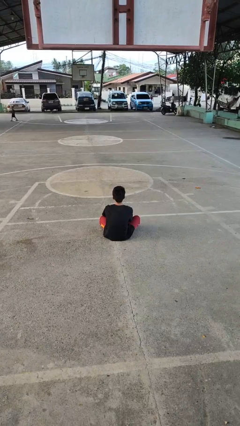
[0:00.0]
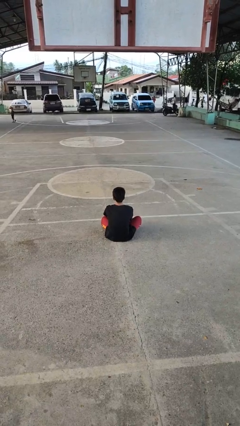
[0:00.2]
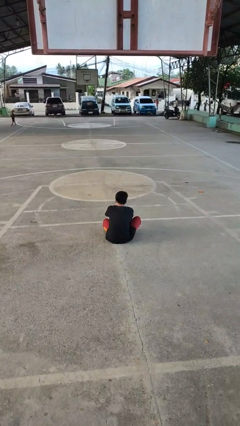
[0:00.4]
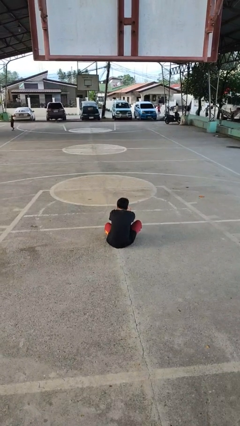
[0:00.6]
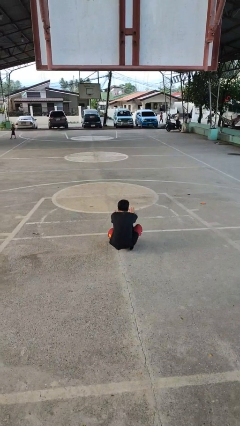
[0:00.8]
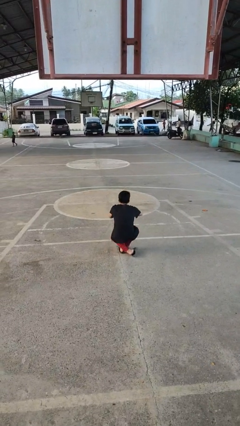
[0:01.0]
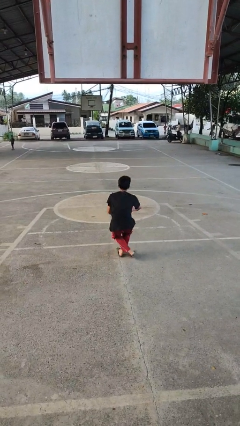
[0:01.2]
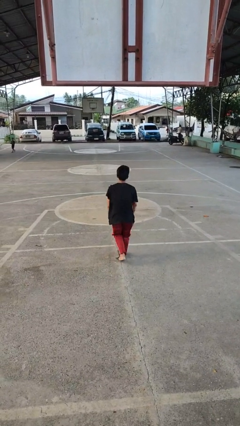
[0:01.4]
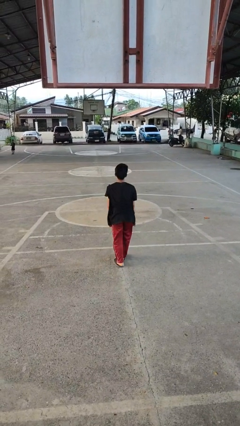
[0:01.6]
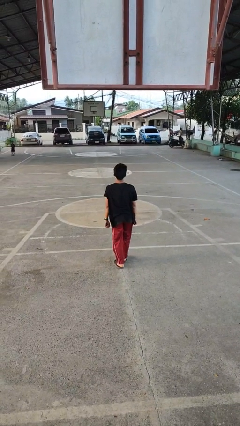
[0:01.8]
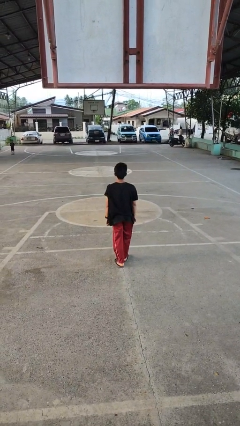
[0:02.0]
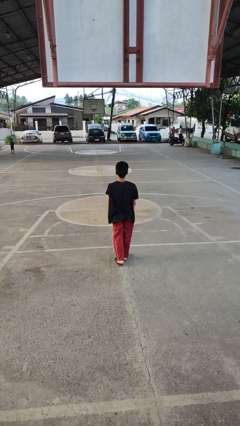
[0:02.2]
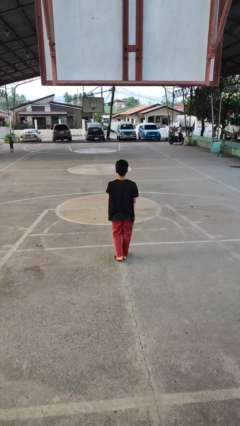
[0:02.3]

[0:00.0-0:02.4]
person stands up from floor

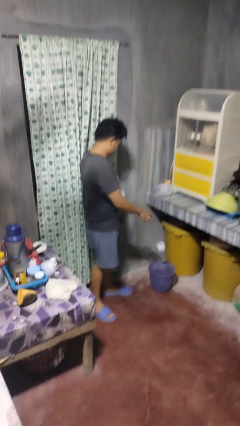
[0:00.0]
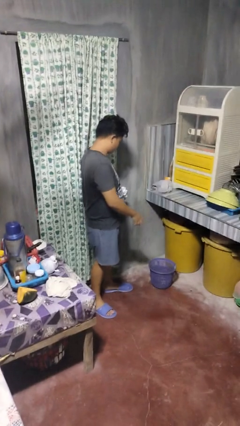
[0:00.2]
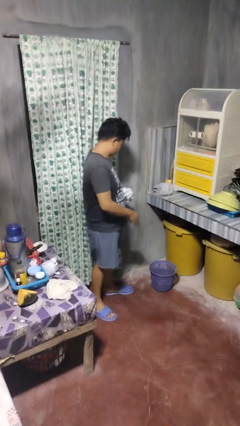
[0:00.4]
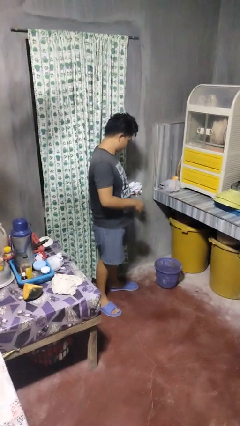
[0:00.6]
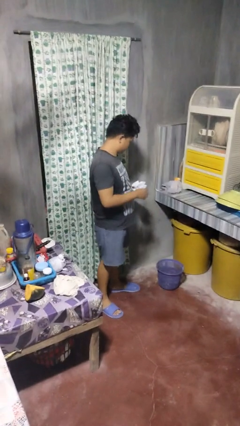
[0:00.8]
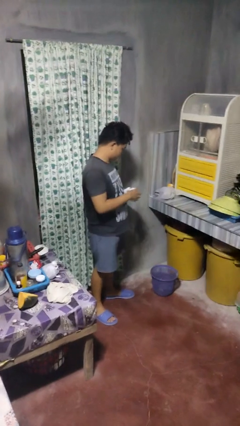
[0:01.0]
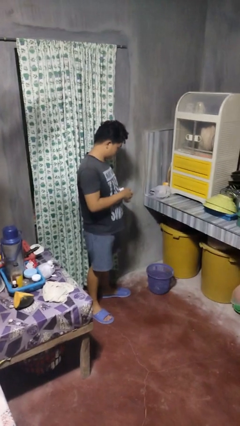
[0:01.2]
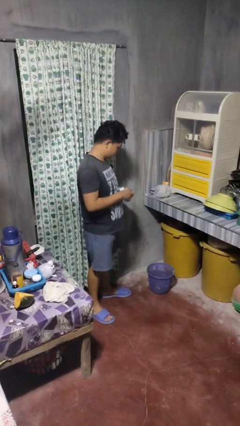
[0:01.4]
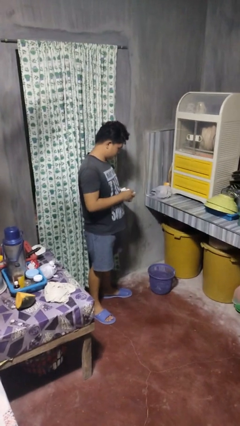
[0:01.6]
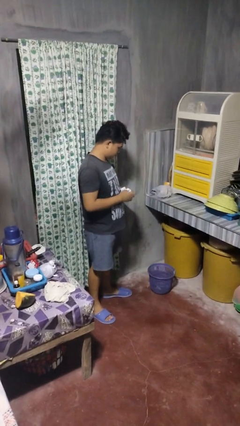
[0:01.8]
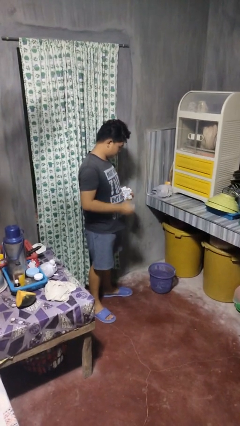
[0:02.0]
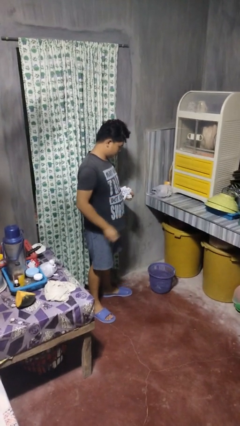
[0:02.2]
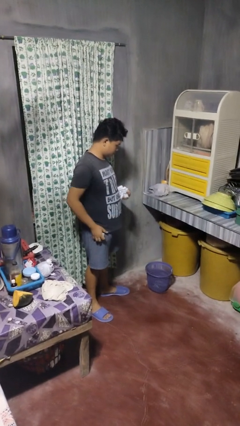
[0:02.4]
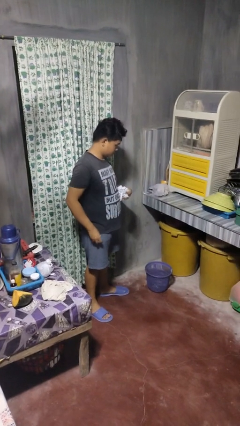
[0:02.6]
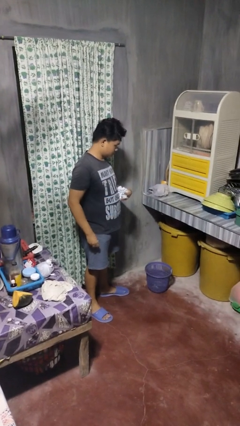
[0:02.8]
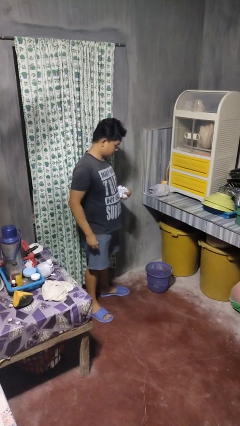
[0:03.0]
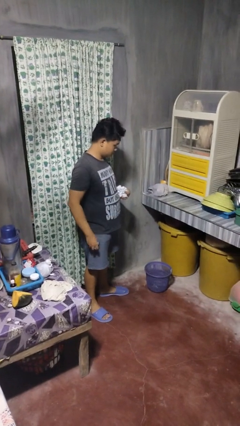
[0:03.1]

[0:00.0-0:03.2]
person discards trash

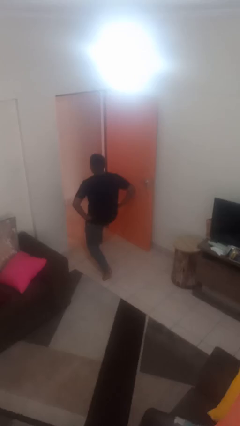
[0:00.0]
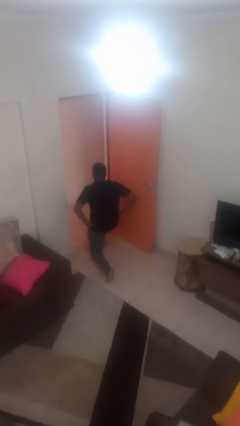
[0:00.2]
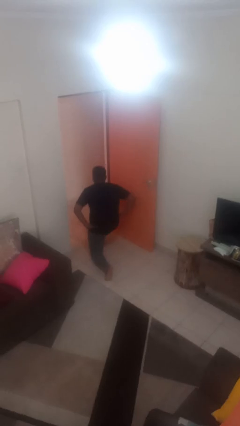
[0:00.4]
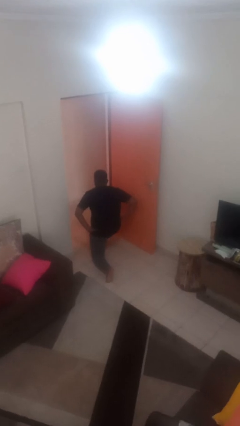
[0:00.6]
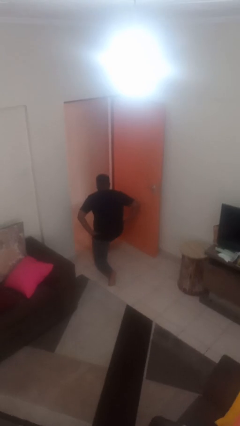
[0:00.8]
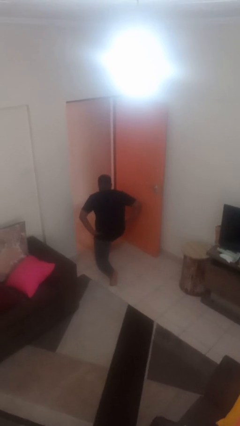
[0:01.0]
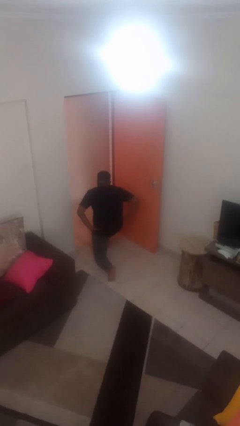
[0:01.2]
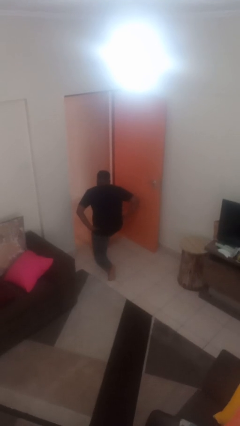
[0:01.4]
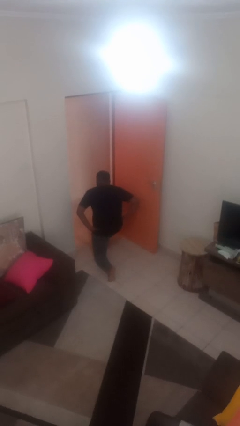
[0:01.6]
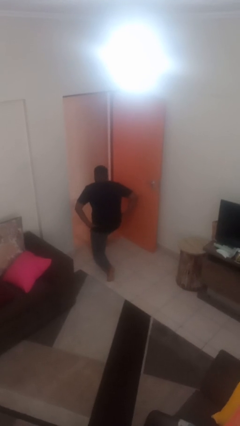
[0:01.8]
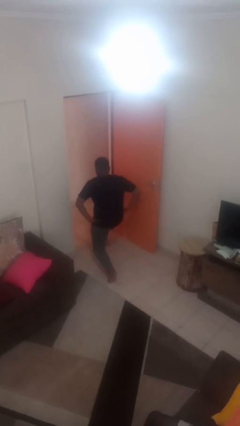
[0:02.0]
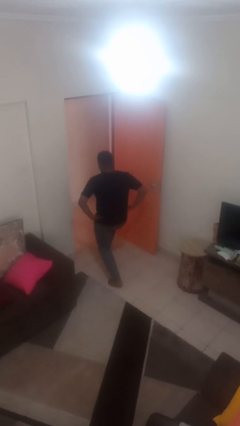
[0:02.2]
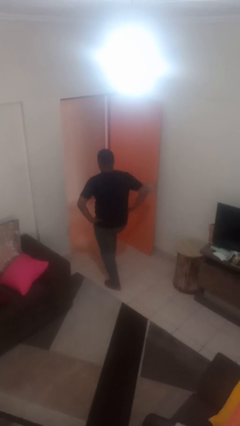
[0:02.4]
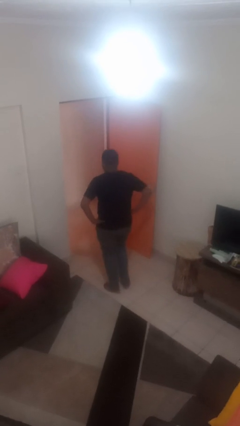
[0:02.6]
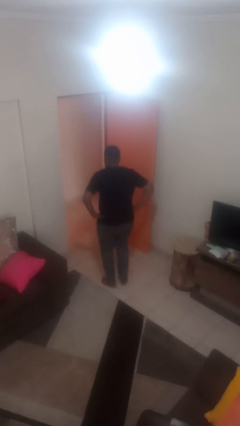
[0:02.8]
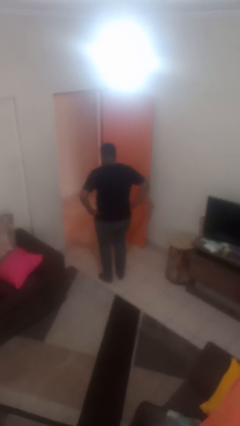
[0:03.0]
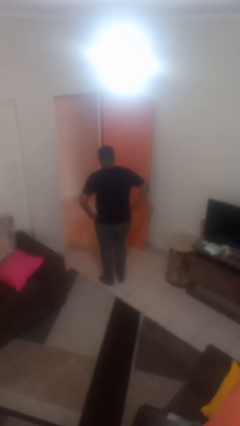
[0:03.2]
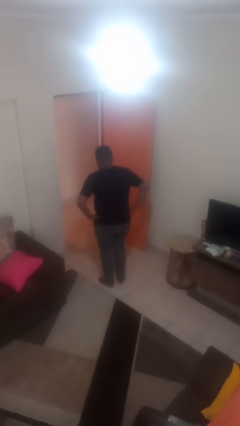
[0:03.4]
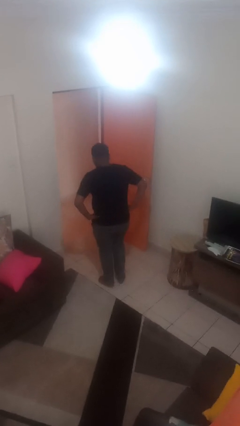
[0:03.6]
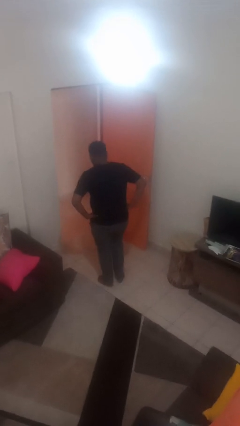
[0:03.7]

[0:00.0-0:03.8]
person exercises with lunges

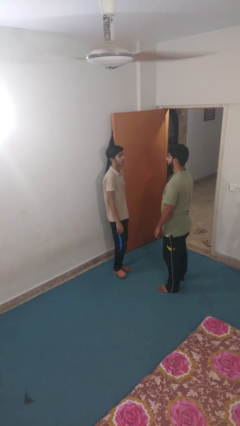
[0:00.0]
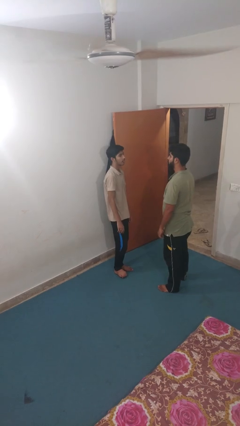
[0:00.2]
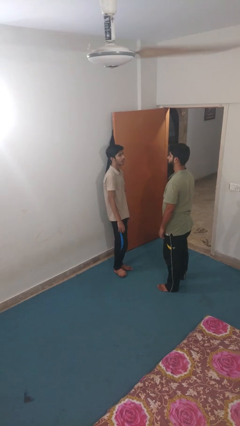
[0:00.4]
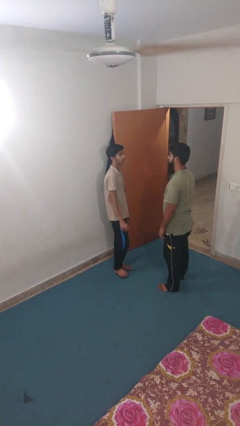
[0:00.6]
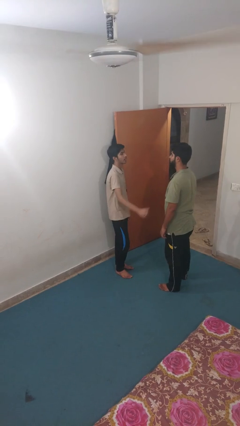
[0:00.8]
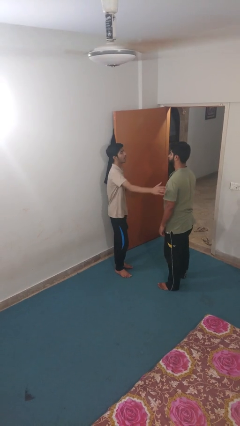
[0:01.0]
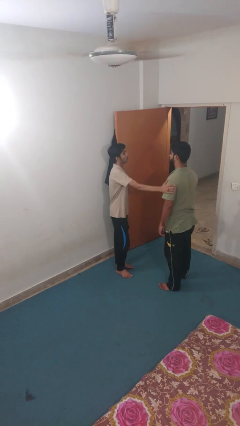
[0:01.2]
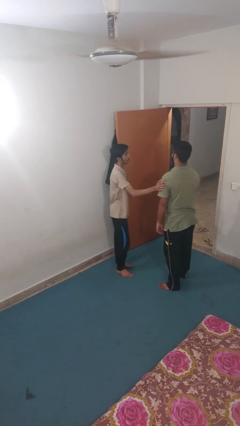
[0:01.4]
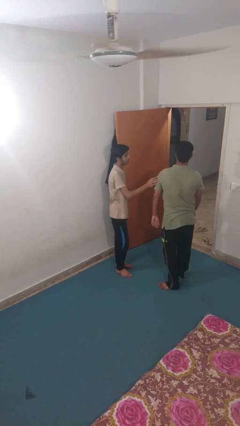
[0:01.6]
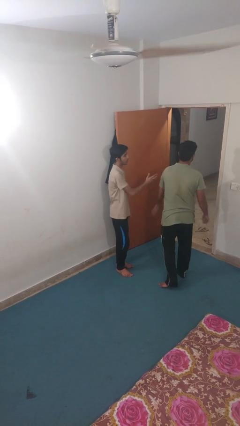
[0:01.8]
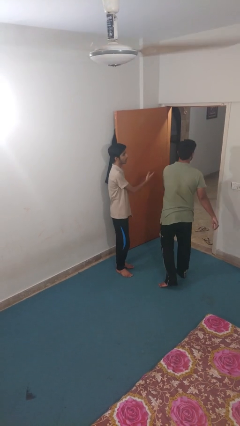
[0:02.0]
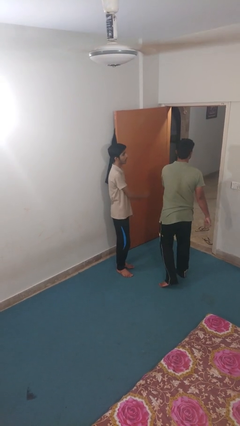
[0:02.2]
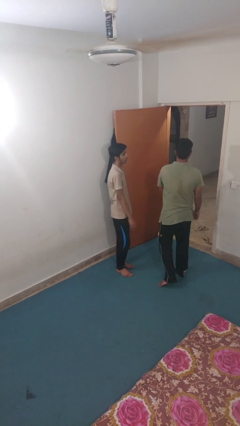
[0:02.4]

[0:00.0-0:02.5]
person shoves person

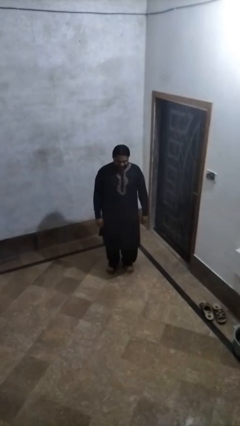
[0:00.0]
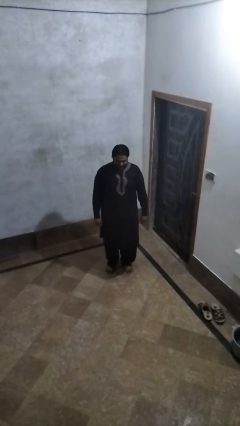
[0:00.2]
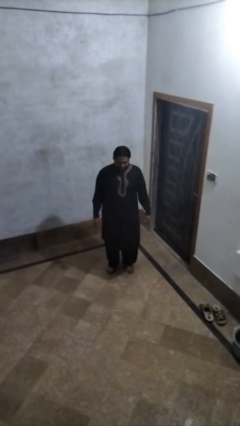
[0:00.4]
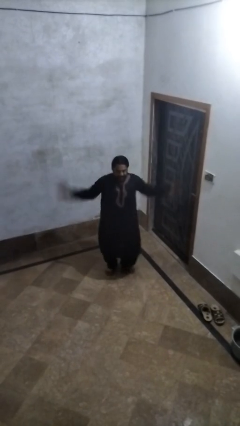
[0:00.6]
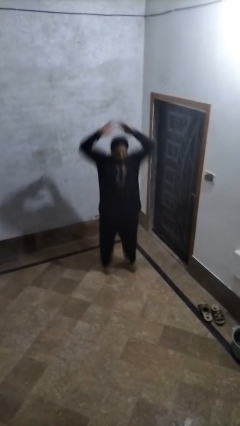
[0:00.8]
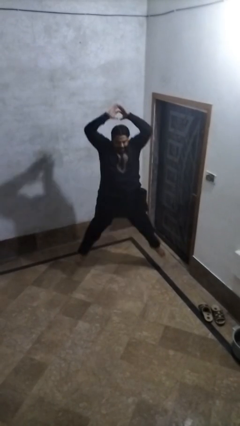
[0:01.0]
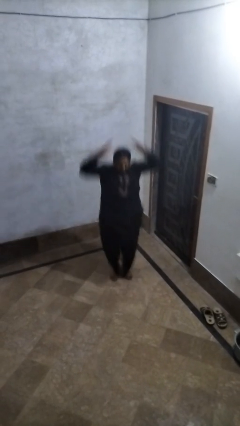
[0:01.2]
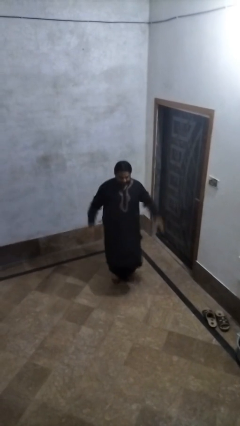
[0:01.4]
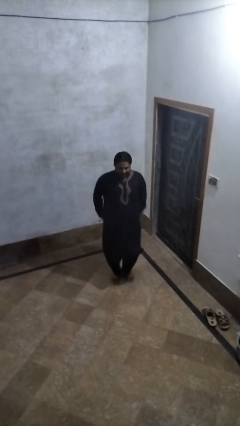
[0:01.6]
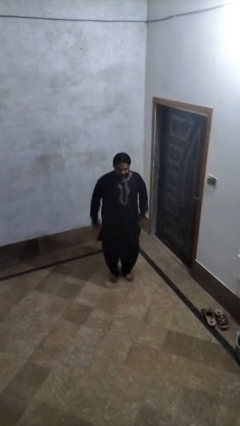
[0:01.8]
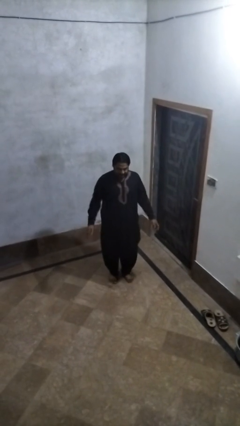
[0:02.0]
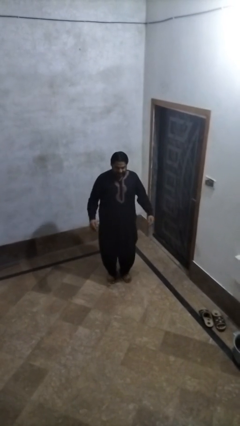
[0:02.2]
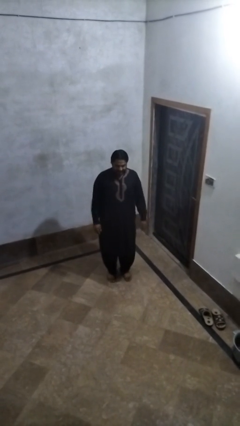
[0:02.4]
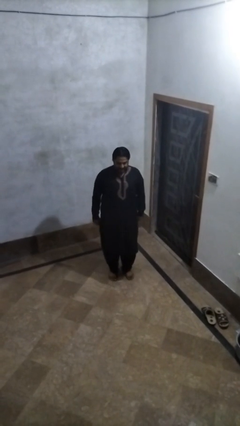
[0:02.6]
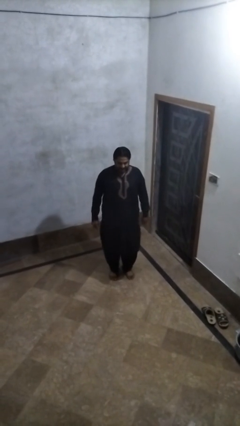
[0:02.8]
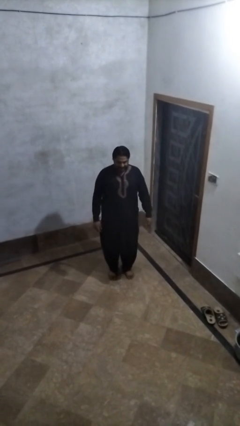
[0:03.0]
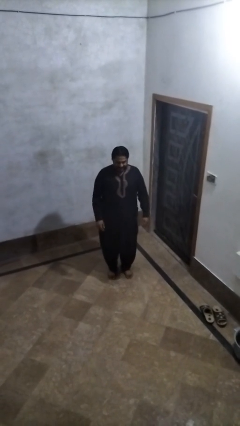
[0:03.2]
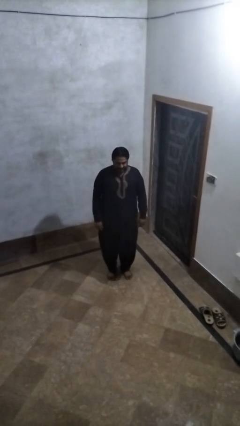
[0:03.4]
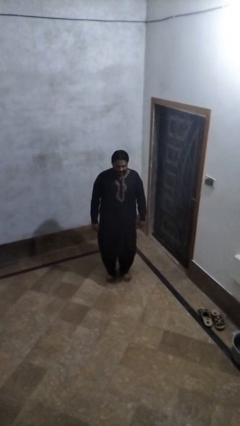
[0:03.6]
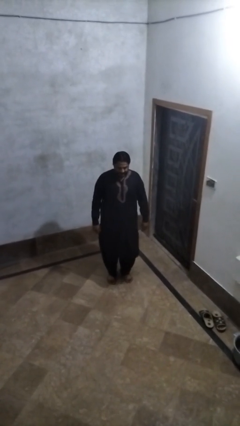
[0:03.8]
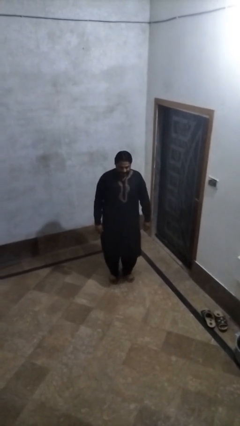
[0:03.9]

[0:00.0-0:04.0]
person exercises with jumping jacks

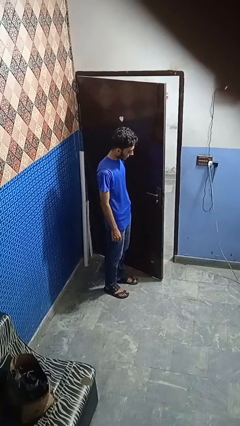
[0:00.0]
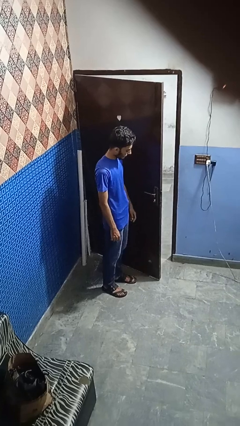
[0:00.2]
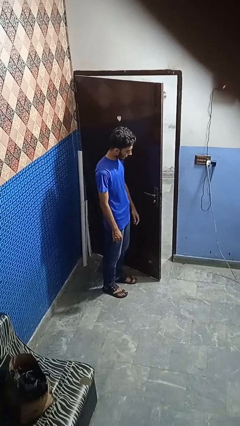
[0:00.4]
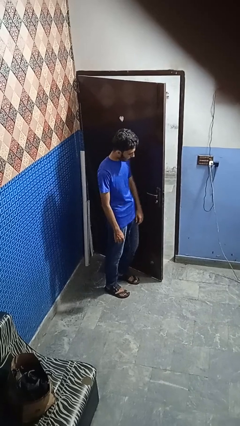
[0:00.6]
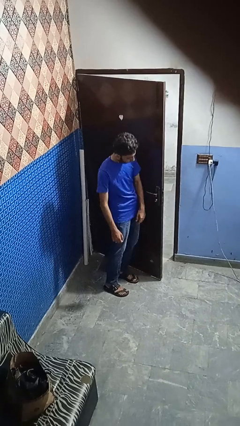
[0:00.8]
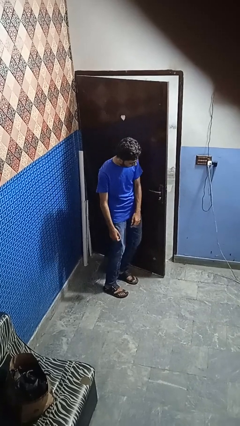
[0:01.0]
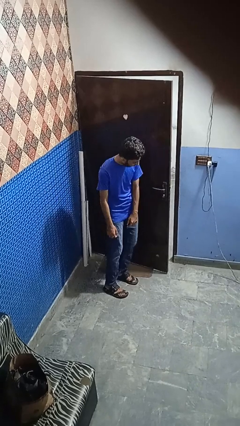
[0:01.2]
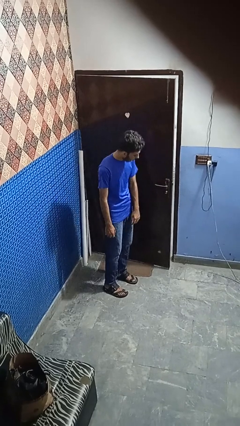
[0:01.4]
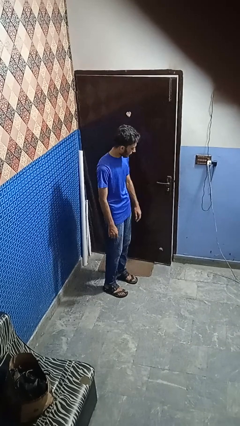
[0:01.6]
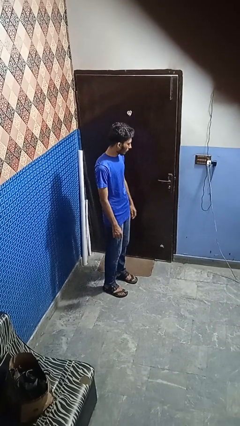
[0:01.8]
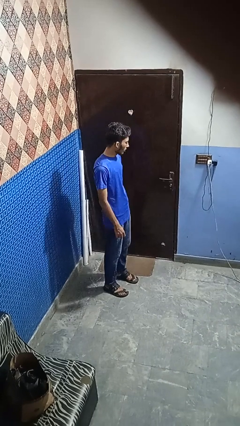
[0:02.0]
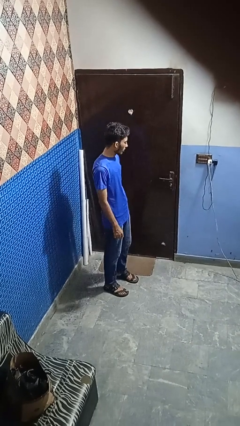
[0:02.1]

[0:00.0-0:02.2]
person closes door with hip
